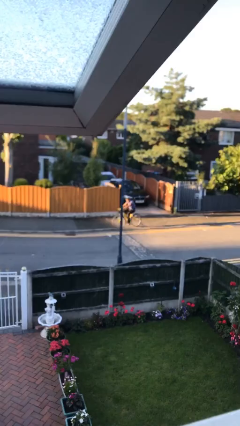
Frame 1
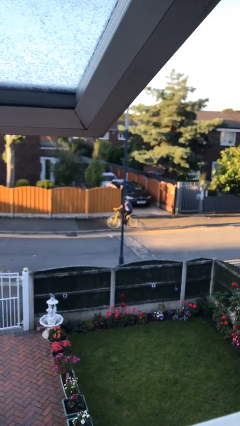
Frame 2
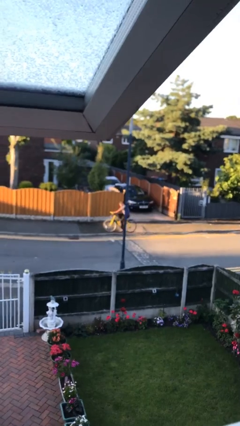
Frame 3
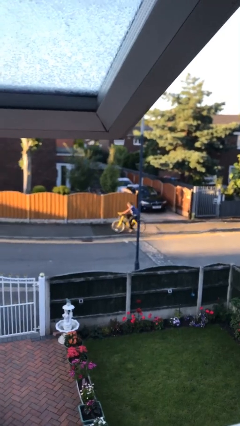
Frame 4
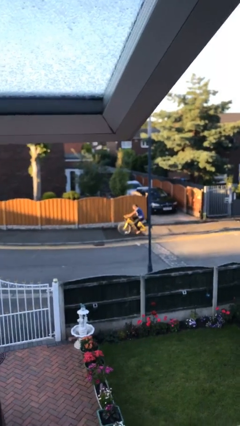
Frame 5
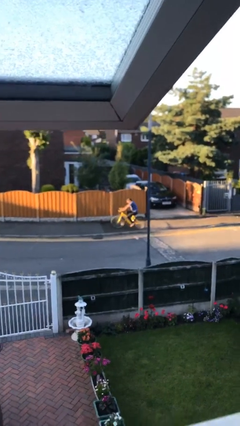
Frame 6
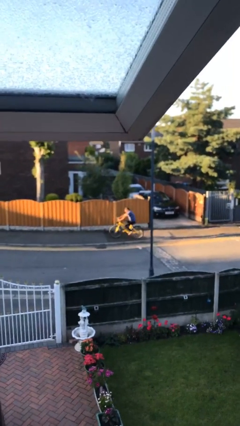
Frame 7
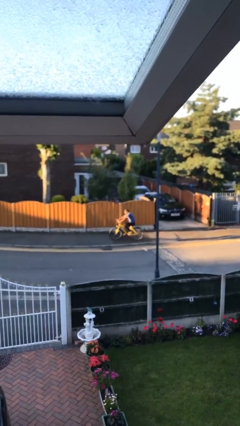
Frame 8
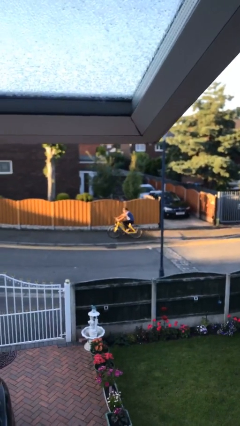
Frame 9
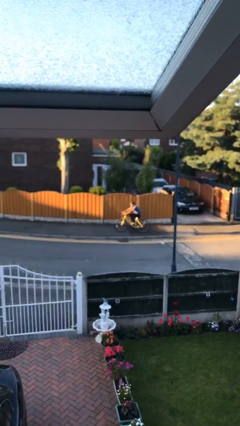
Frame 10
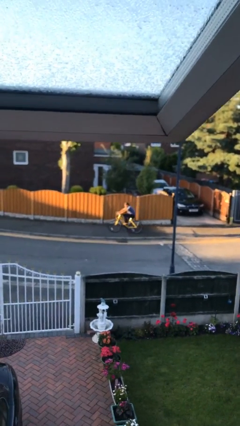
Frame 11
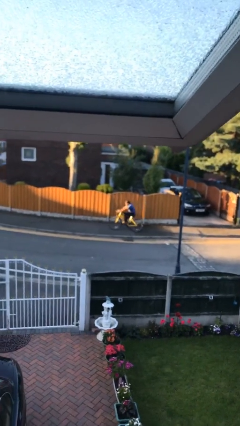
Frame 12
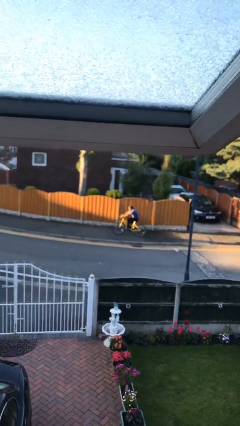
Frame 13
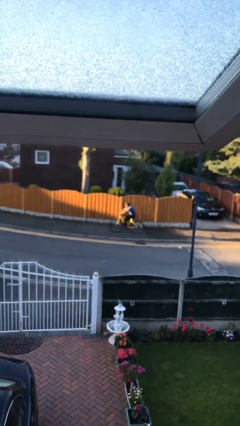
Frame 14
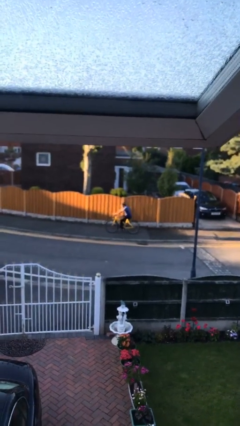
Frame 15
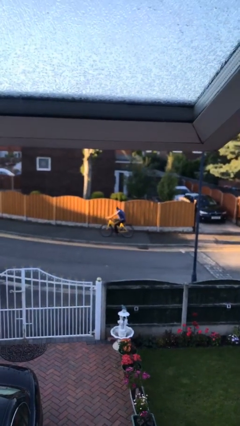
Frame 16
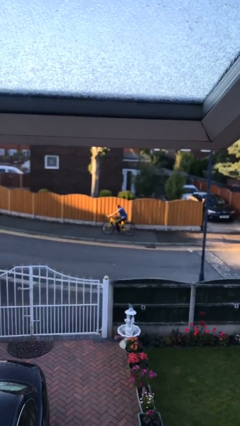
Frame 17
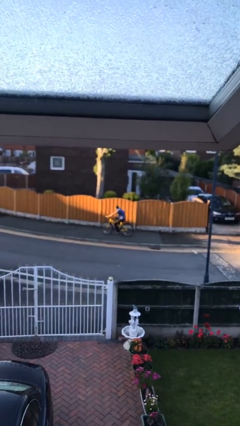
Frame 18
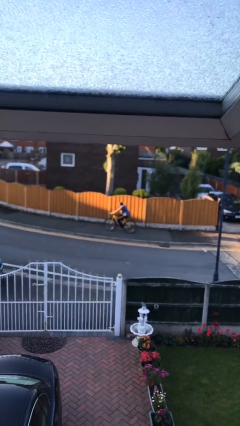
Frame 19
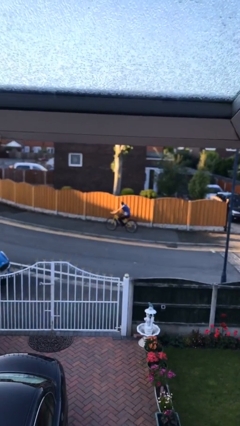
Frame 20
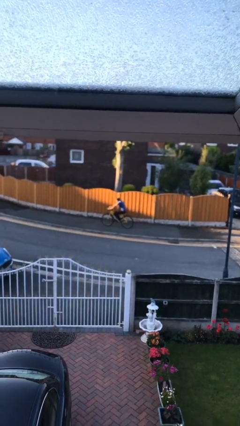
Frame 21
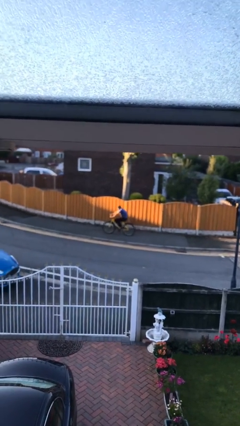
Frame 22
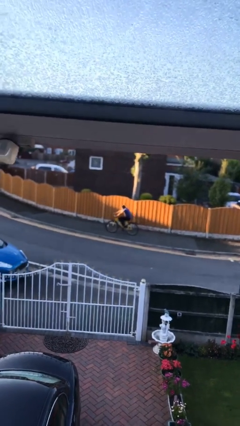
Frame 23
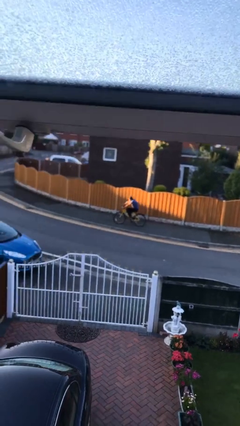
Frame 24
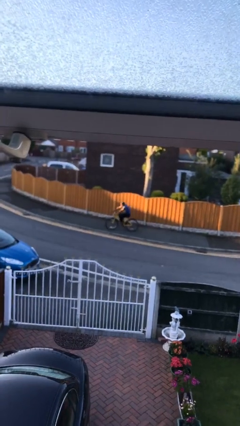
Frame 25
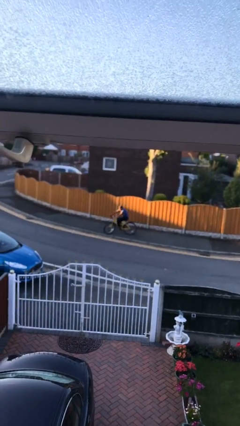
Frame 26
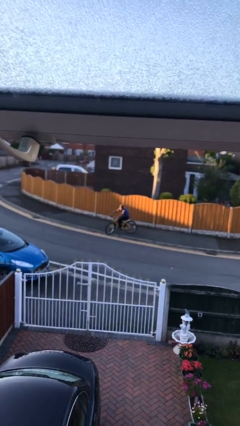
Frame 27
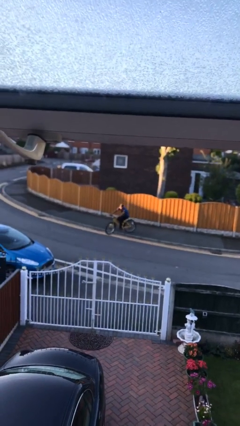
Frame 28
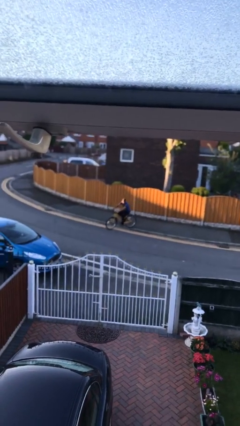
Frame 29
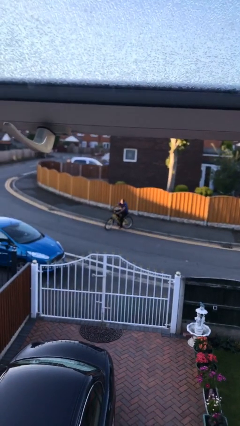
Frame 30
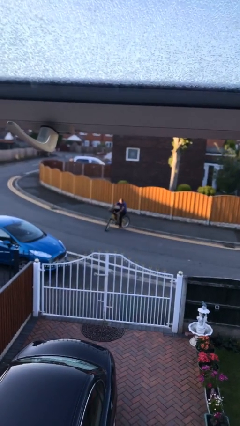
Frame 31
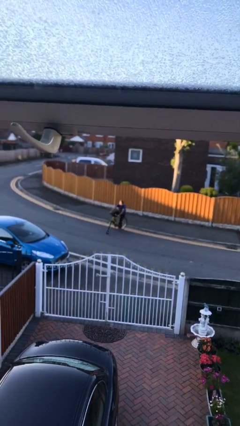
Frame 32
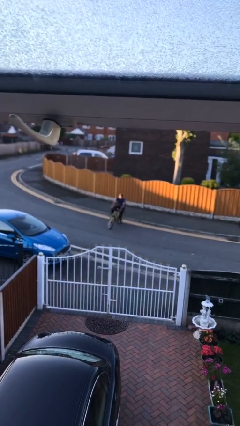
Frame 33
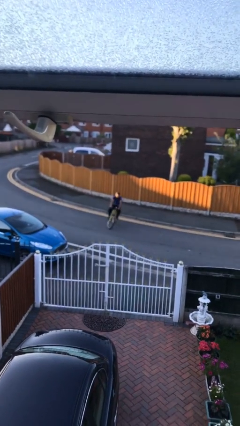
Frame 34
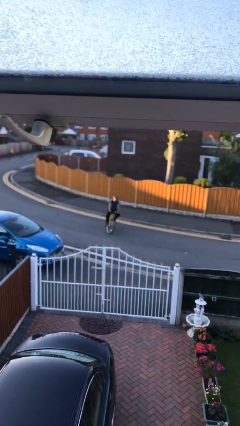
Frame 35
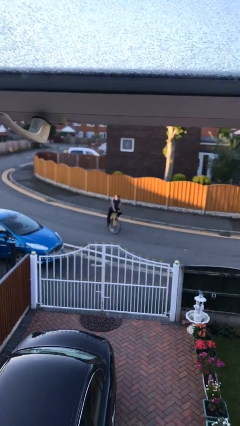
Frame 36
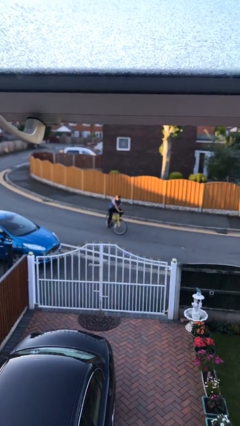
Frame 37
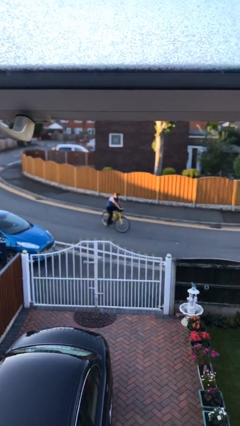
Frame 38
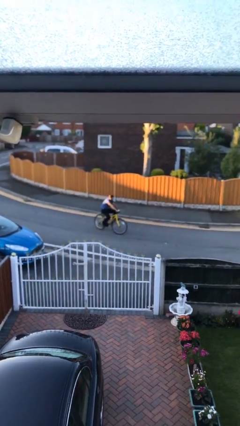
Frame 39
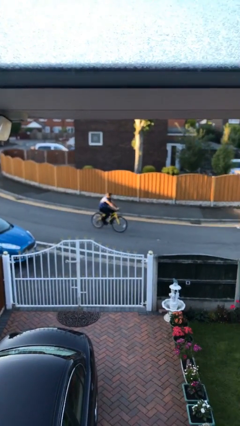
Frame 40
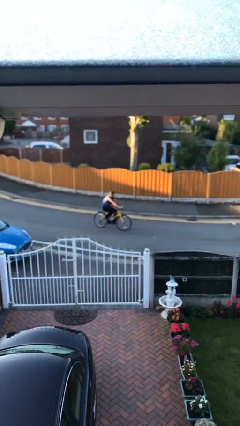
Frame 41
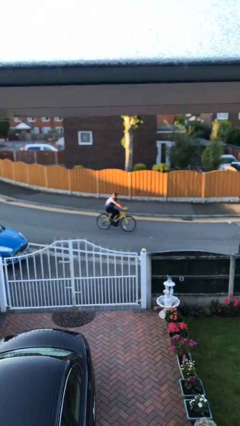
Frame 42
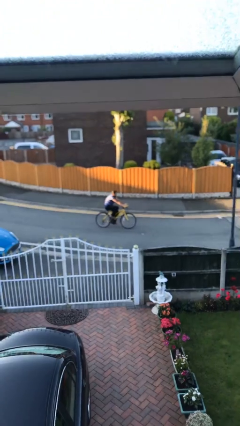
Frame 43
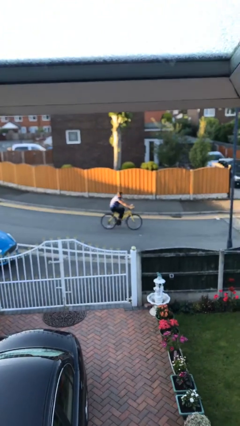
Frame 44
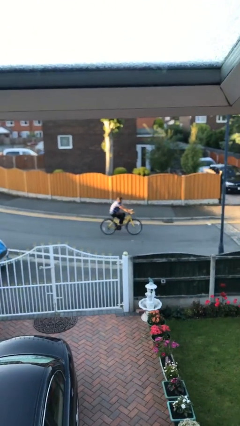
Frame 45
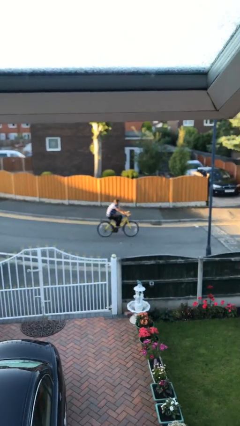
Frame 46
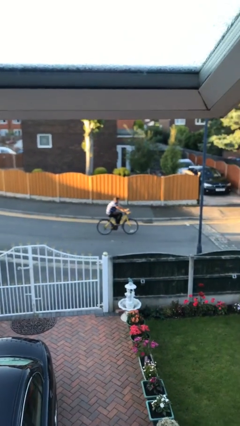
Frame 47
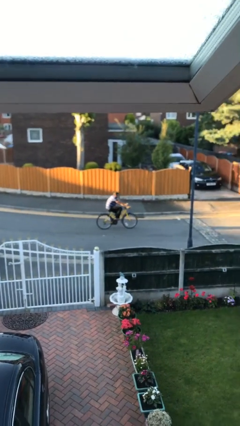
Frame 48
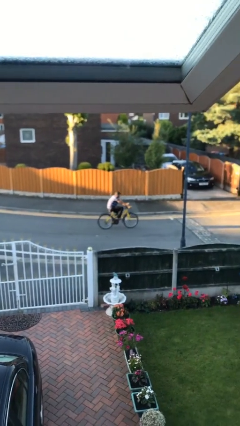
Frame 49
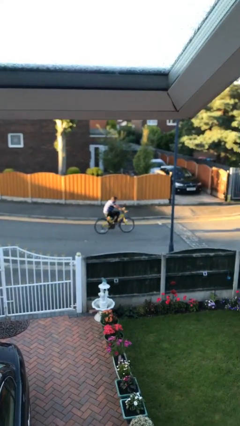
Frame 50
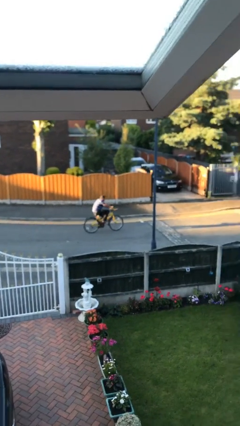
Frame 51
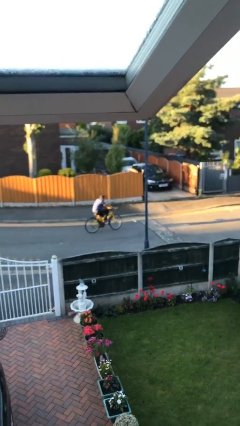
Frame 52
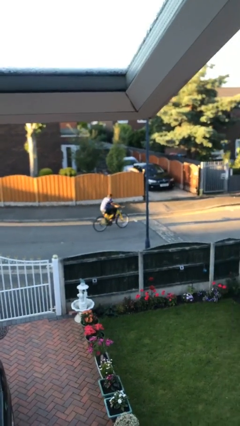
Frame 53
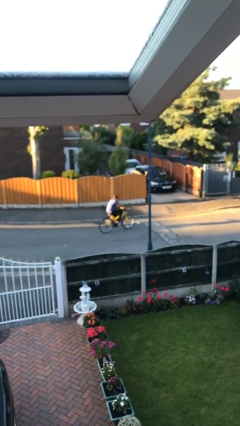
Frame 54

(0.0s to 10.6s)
person rides bicycle

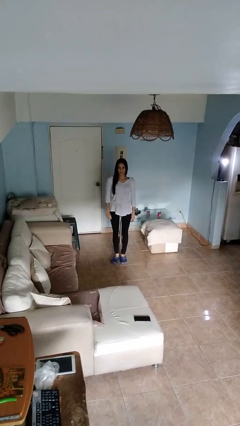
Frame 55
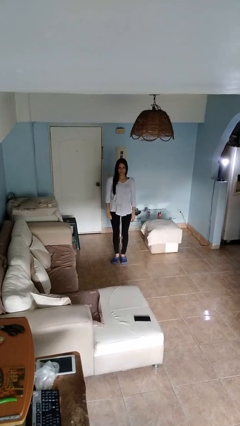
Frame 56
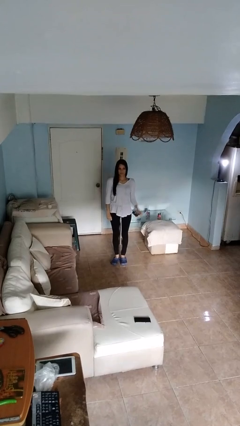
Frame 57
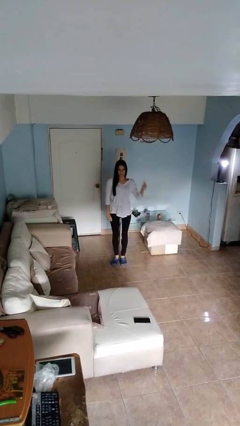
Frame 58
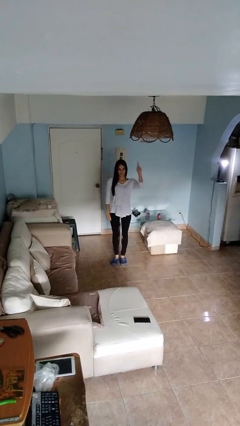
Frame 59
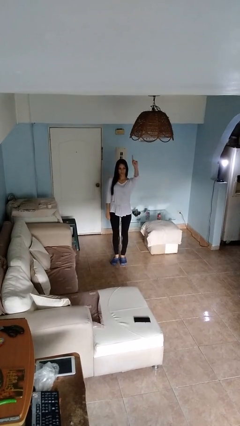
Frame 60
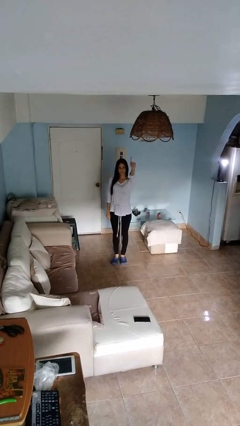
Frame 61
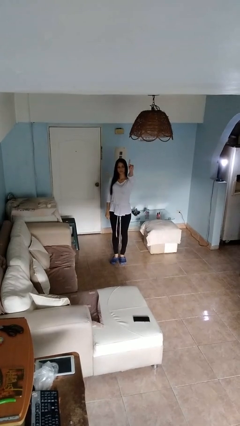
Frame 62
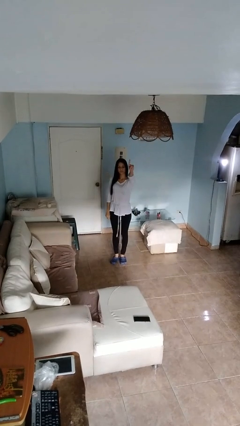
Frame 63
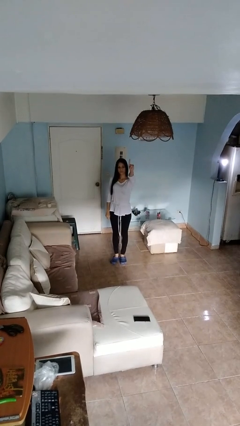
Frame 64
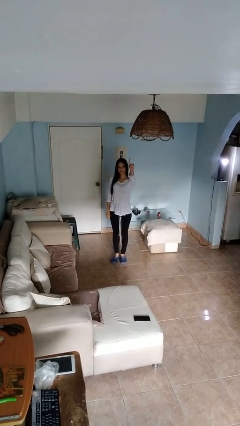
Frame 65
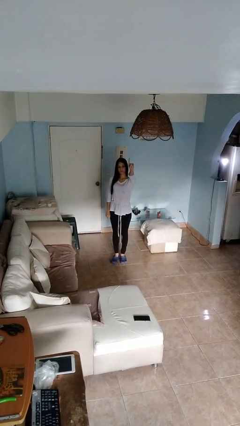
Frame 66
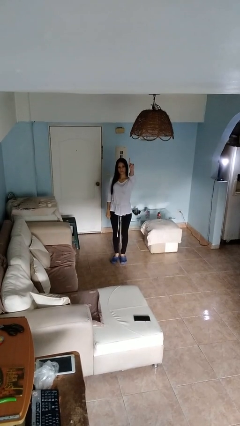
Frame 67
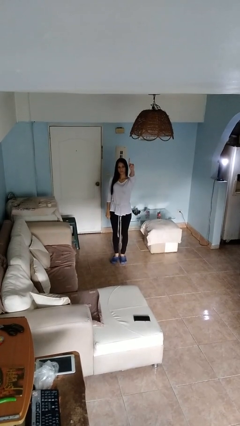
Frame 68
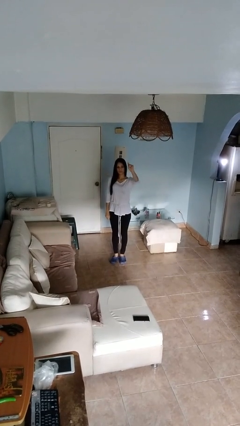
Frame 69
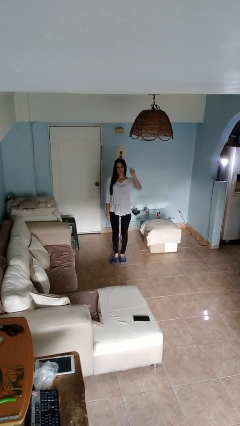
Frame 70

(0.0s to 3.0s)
person gestures number one

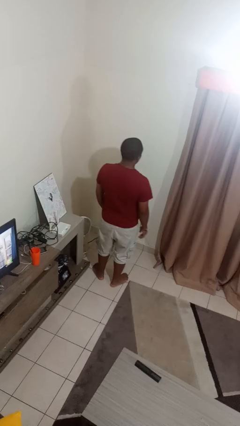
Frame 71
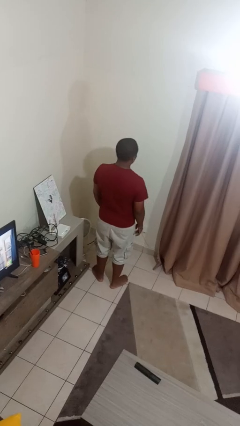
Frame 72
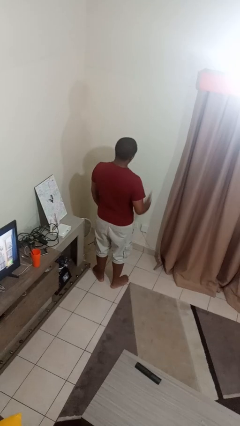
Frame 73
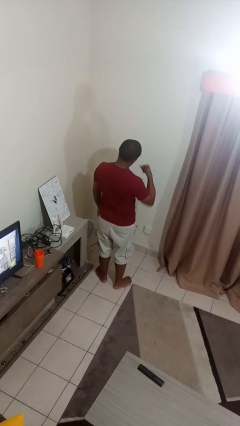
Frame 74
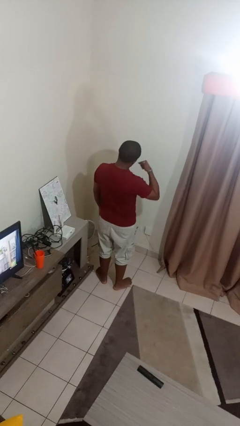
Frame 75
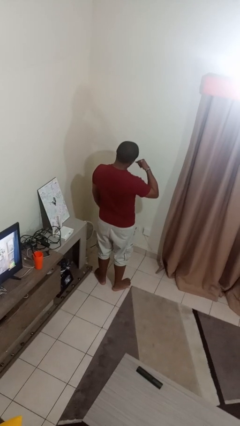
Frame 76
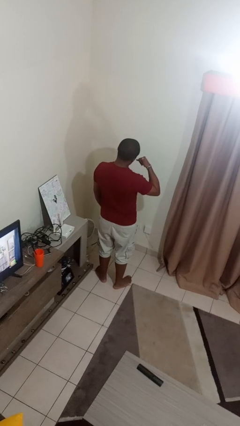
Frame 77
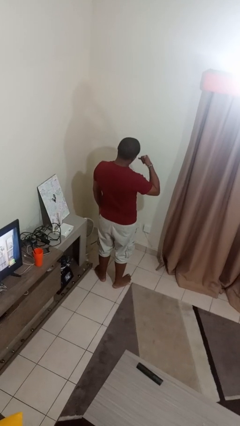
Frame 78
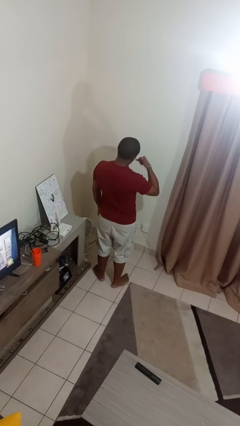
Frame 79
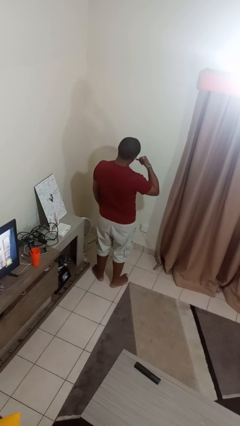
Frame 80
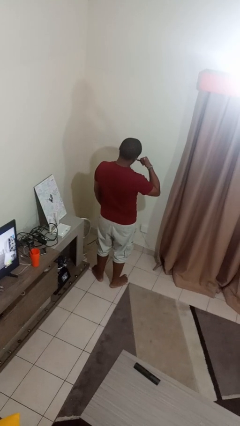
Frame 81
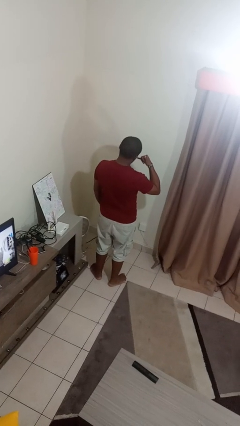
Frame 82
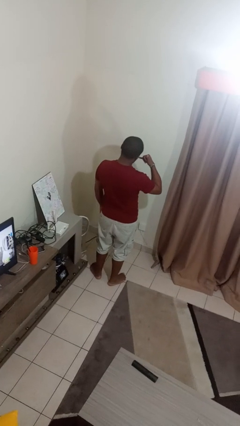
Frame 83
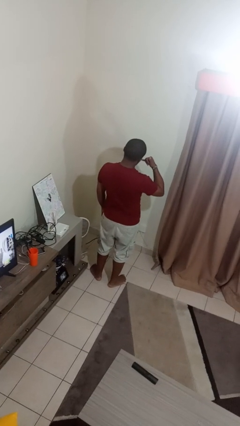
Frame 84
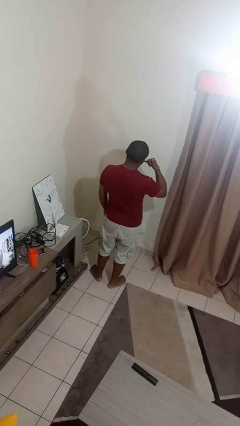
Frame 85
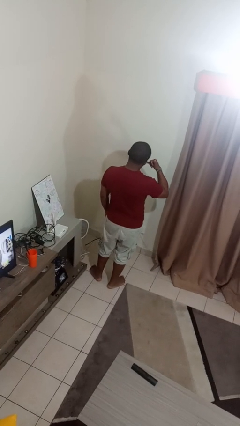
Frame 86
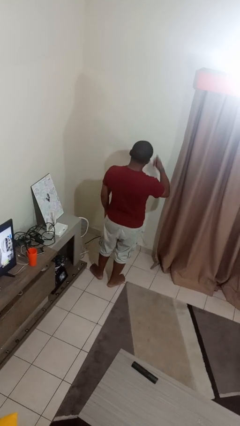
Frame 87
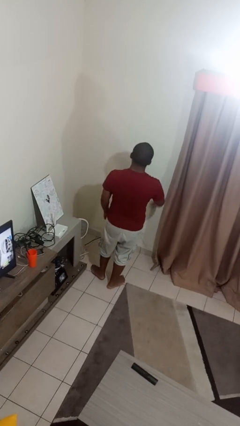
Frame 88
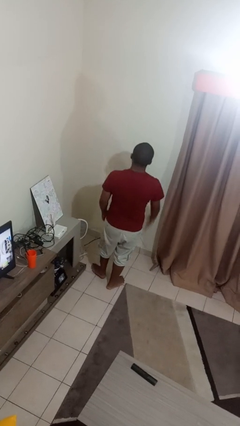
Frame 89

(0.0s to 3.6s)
person gestures call me

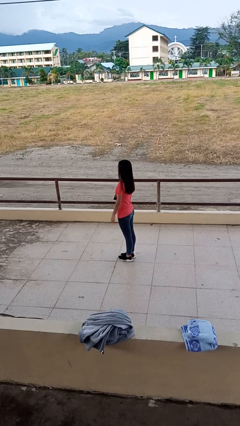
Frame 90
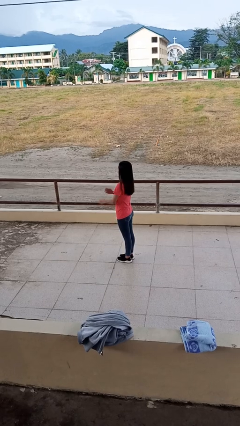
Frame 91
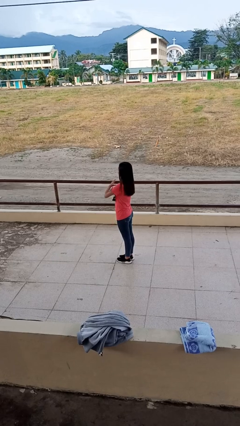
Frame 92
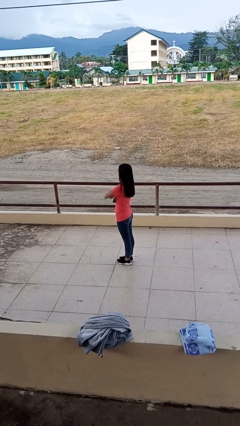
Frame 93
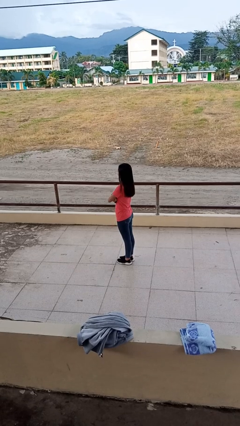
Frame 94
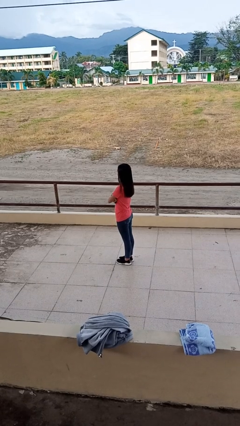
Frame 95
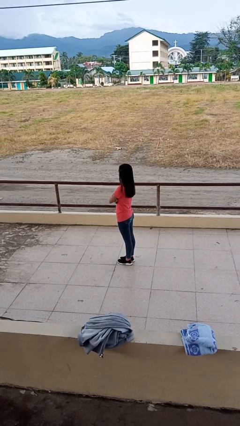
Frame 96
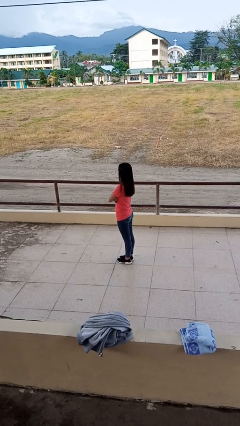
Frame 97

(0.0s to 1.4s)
person crosses arms
